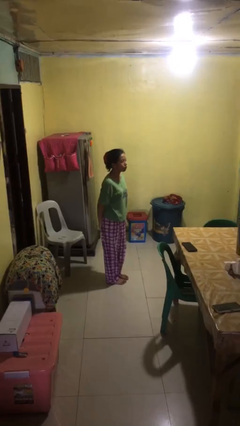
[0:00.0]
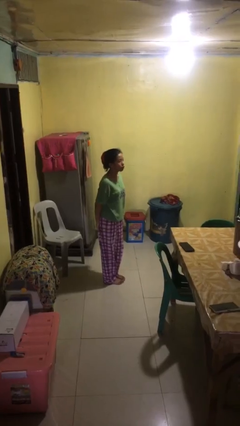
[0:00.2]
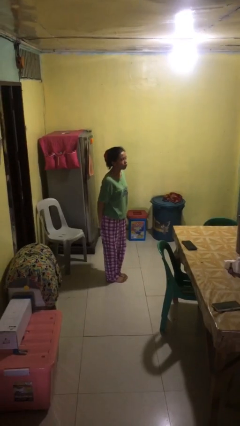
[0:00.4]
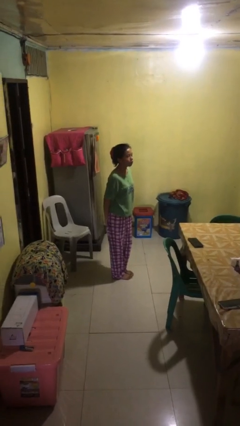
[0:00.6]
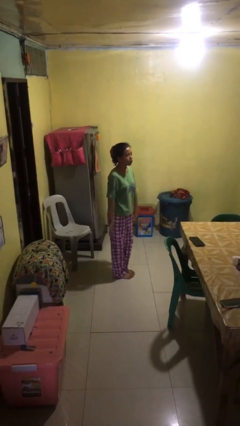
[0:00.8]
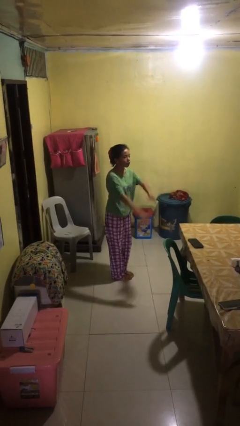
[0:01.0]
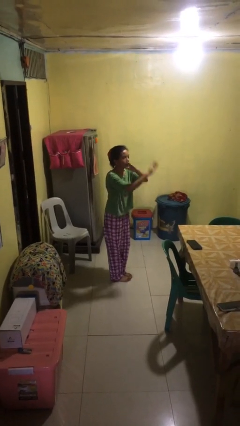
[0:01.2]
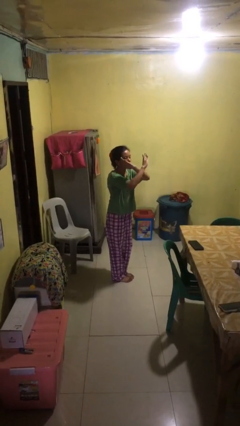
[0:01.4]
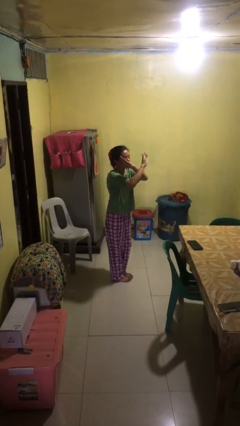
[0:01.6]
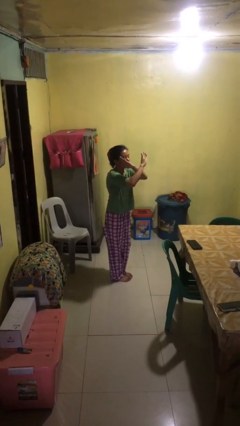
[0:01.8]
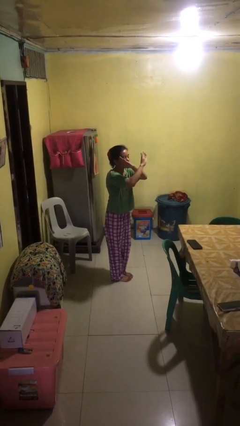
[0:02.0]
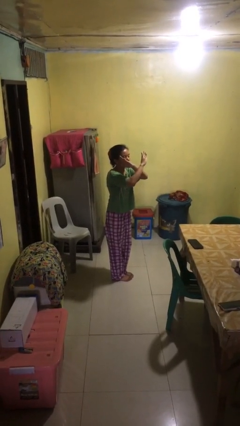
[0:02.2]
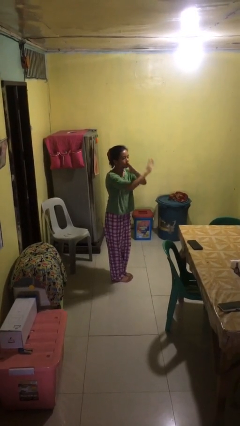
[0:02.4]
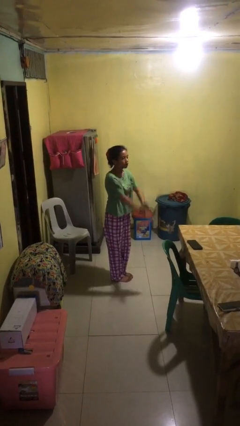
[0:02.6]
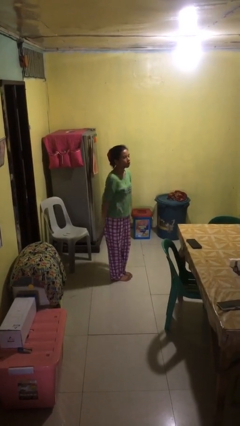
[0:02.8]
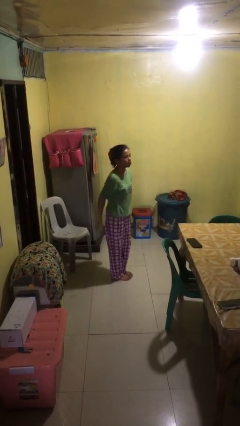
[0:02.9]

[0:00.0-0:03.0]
person gestures arms x

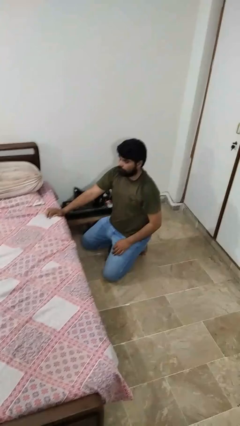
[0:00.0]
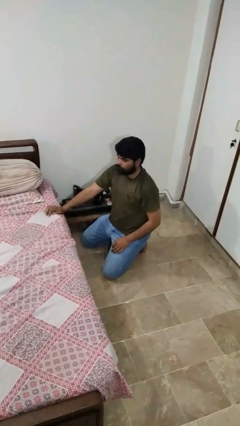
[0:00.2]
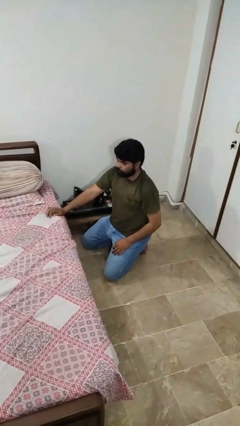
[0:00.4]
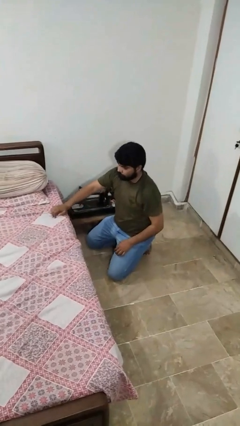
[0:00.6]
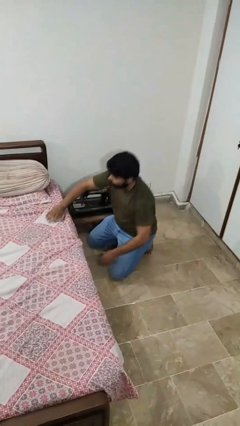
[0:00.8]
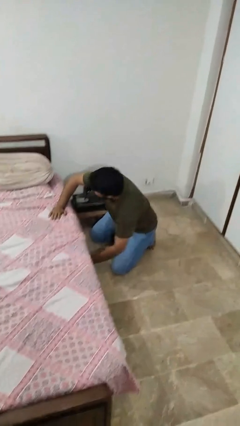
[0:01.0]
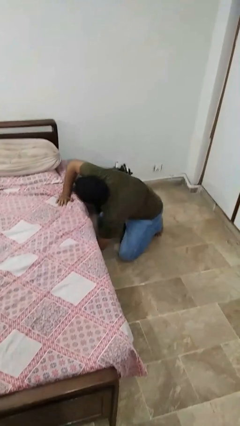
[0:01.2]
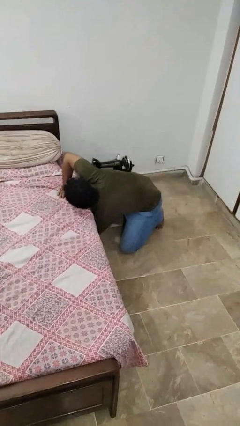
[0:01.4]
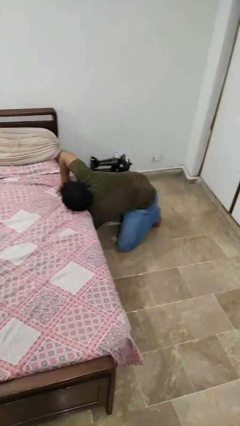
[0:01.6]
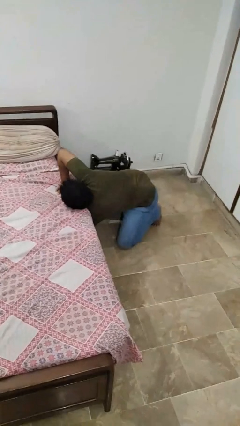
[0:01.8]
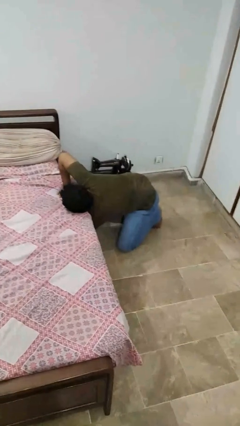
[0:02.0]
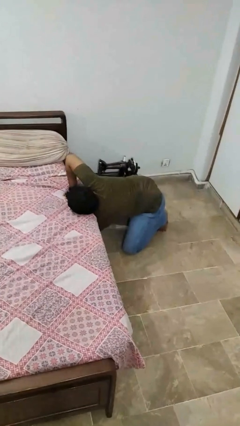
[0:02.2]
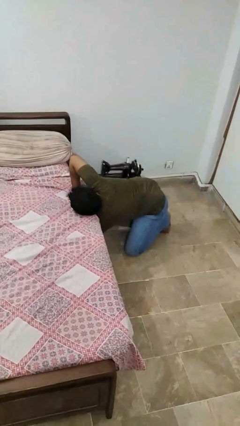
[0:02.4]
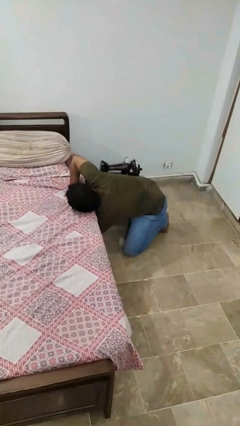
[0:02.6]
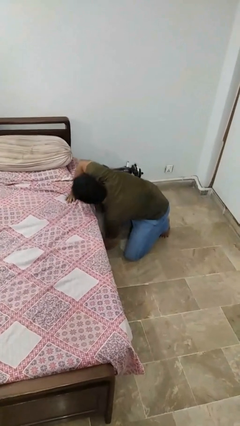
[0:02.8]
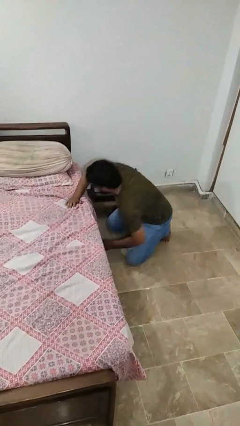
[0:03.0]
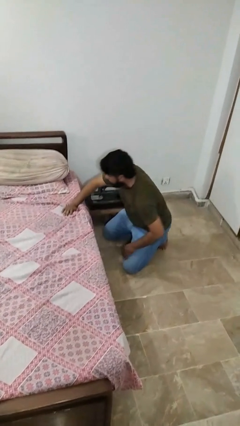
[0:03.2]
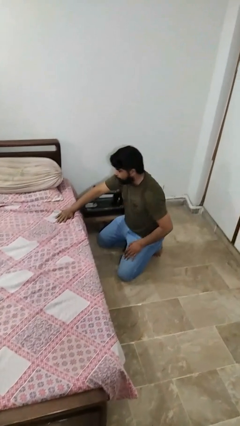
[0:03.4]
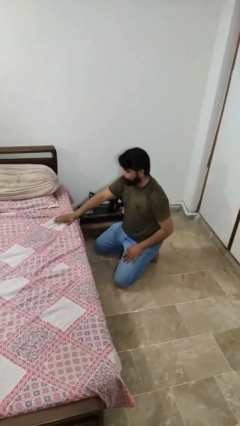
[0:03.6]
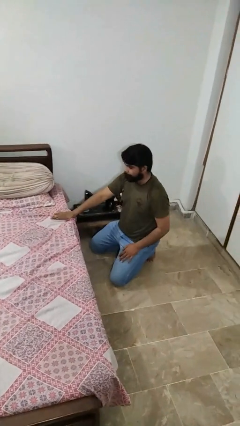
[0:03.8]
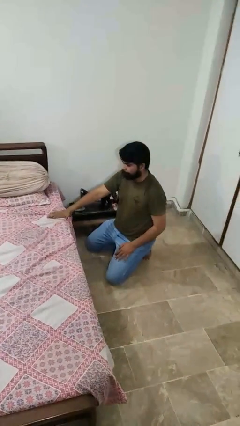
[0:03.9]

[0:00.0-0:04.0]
person searches under bed

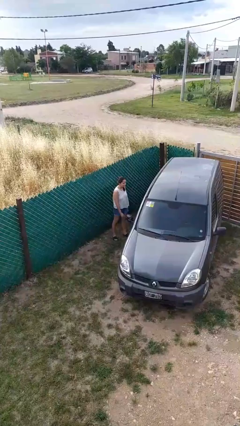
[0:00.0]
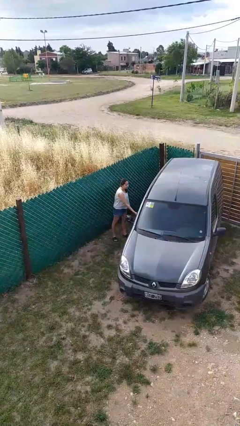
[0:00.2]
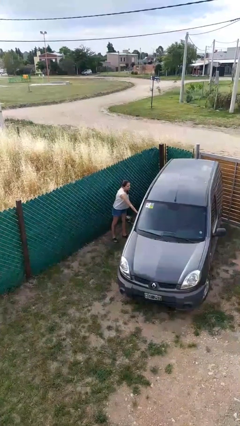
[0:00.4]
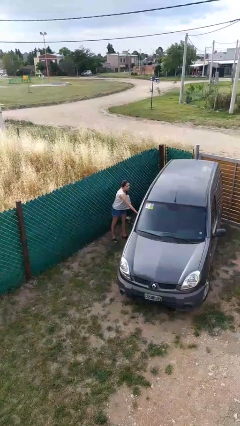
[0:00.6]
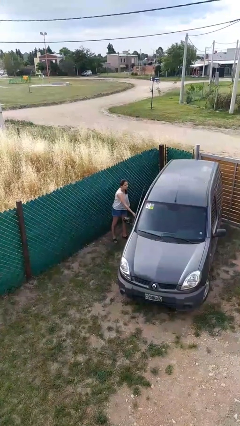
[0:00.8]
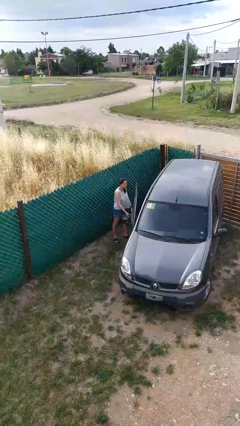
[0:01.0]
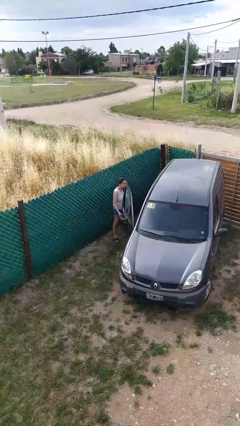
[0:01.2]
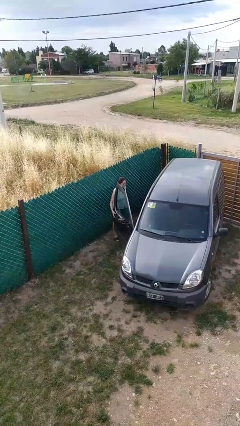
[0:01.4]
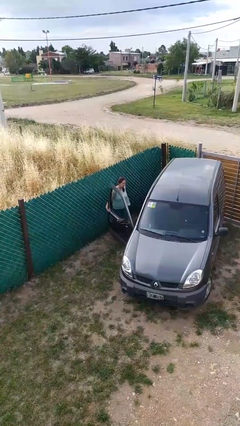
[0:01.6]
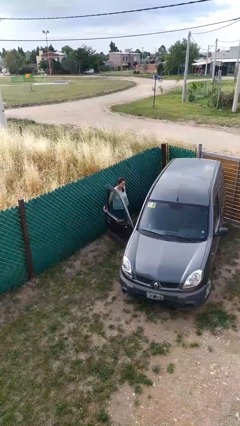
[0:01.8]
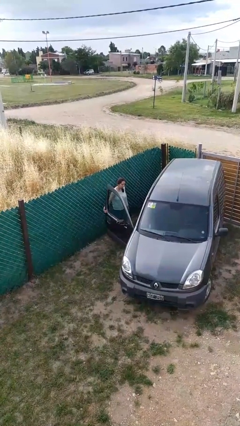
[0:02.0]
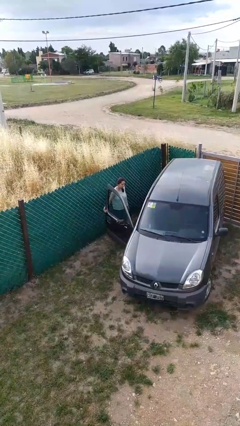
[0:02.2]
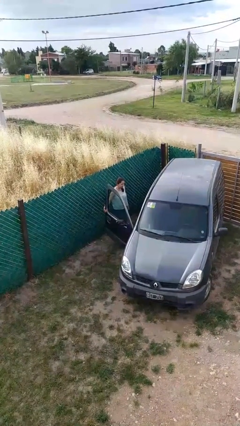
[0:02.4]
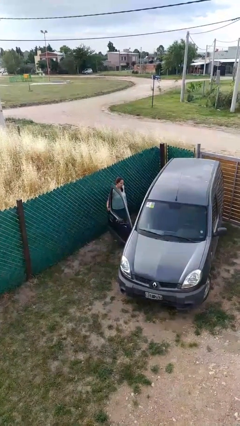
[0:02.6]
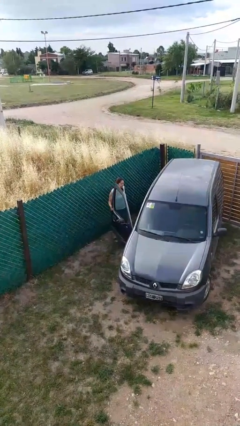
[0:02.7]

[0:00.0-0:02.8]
person opens car door

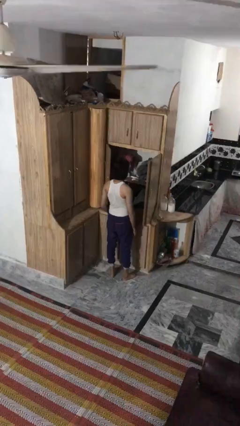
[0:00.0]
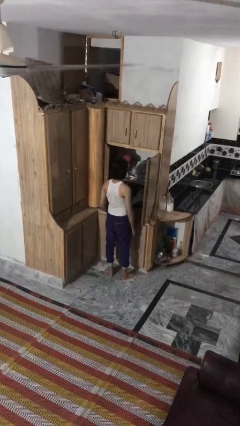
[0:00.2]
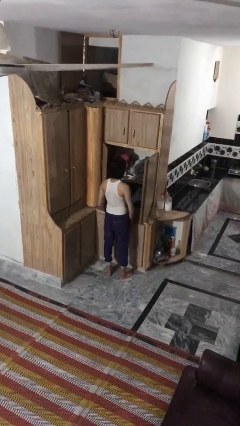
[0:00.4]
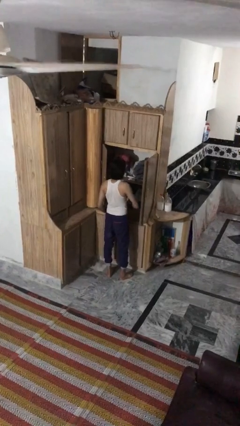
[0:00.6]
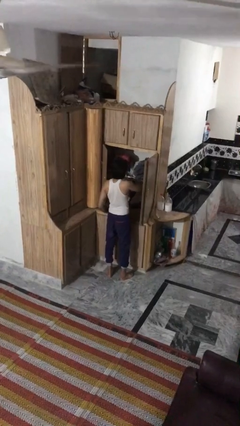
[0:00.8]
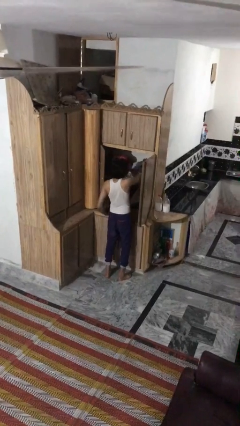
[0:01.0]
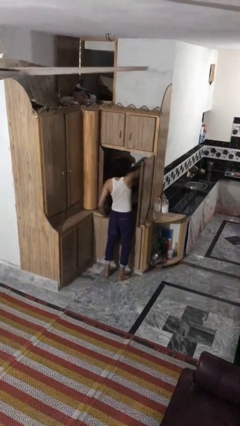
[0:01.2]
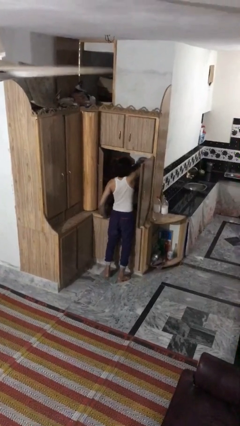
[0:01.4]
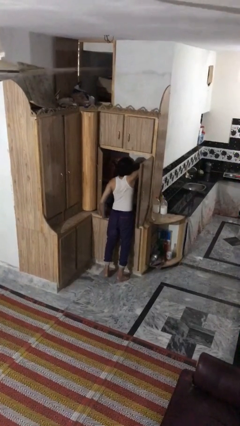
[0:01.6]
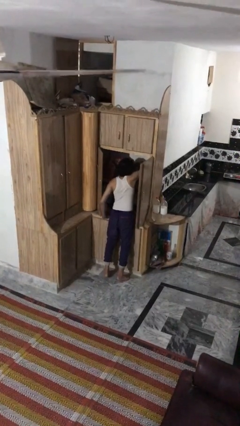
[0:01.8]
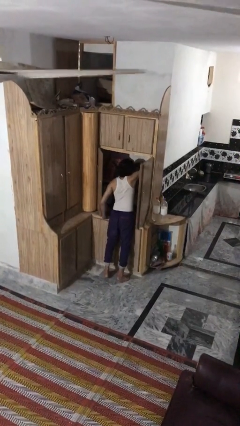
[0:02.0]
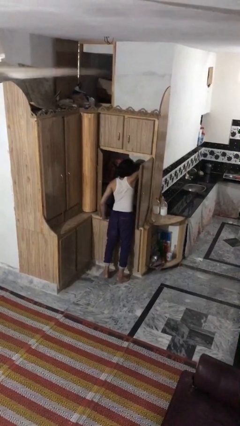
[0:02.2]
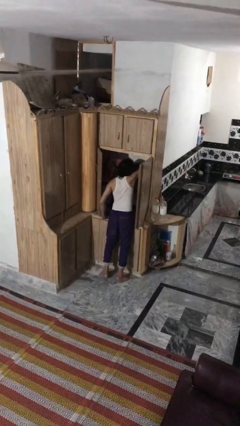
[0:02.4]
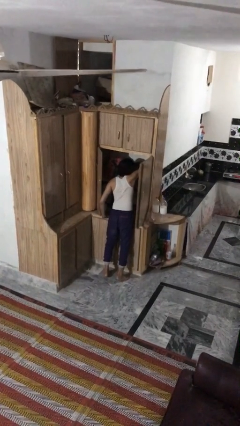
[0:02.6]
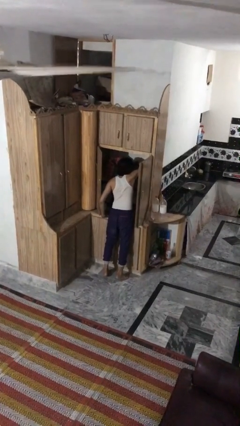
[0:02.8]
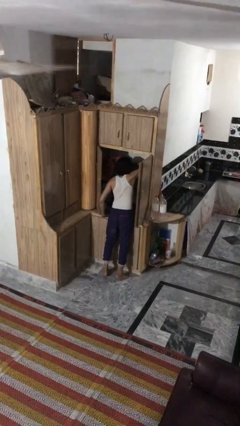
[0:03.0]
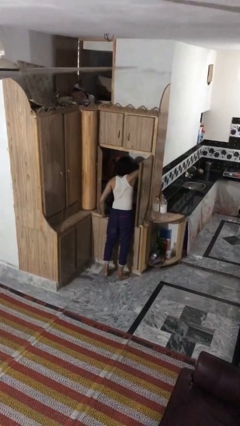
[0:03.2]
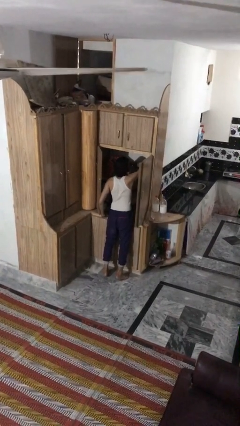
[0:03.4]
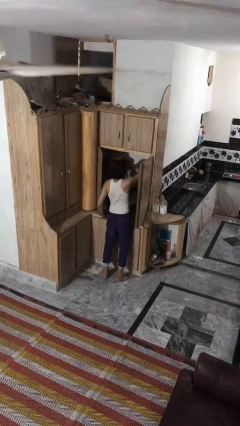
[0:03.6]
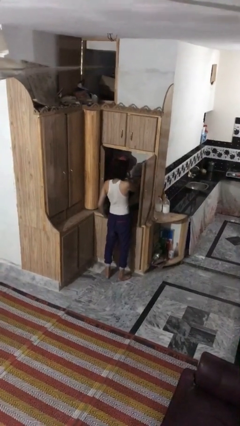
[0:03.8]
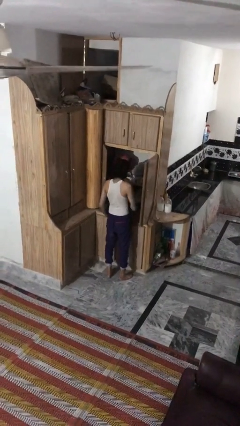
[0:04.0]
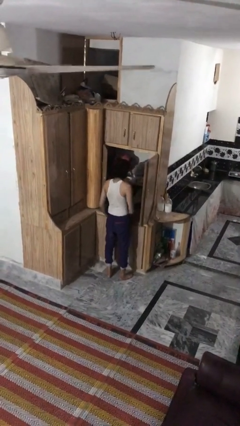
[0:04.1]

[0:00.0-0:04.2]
person searches in cabinet

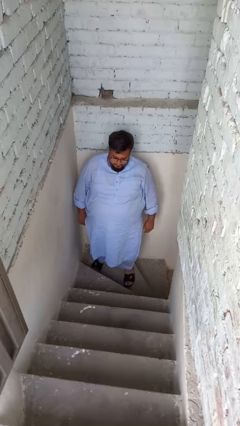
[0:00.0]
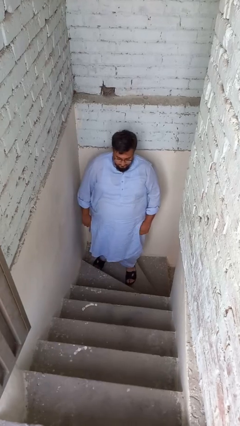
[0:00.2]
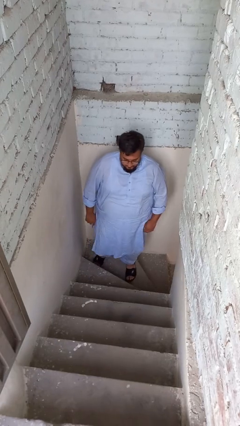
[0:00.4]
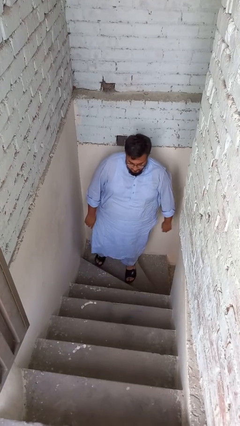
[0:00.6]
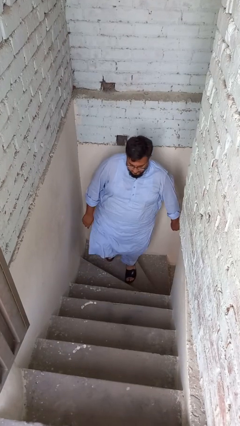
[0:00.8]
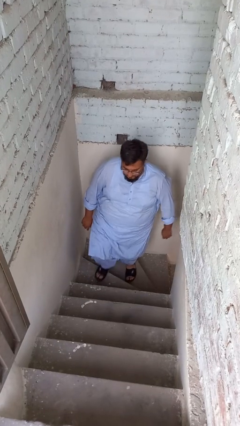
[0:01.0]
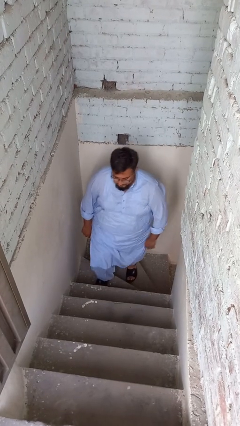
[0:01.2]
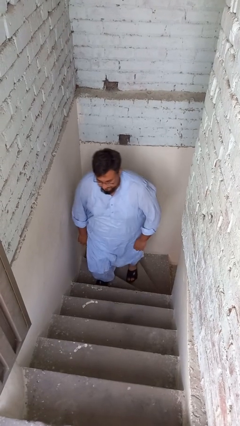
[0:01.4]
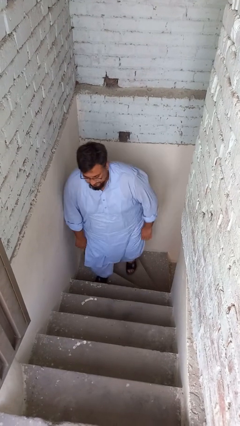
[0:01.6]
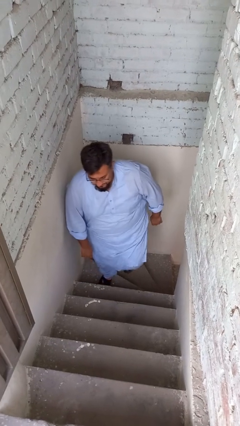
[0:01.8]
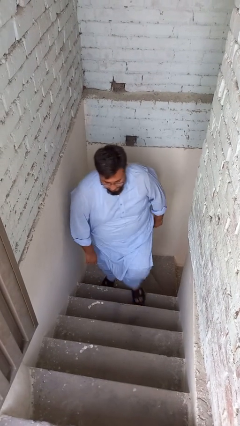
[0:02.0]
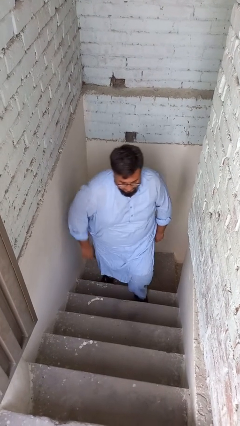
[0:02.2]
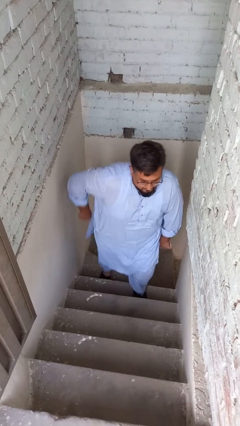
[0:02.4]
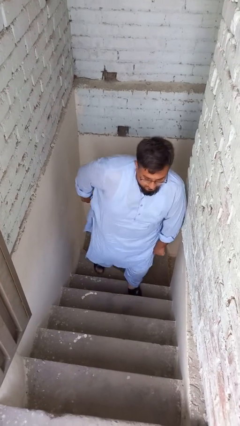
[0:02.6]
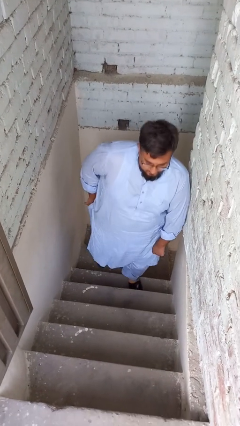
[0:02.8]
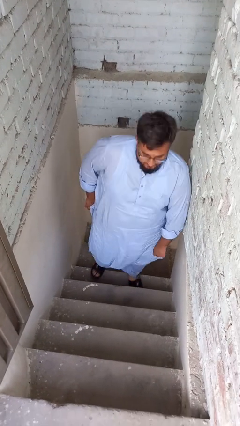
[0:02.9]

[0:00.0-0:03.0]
person climbs up stairs

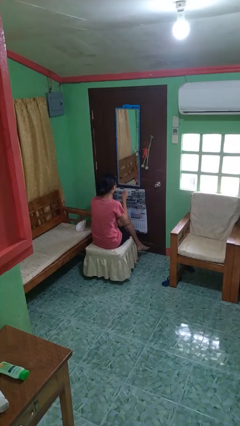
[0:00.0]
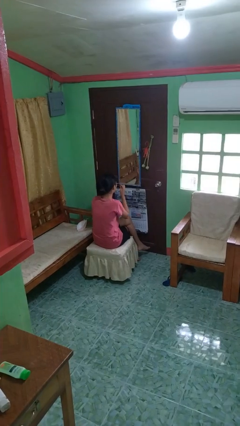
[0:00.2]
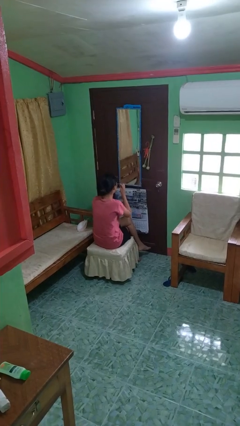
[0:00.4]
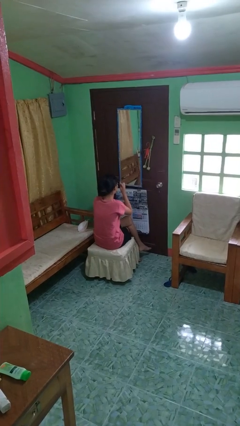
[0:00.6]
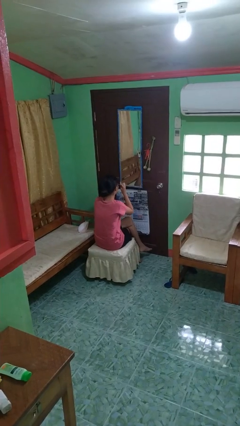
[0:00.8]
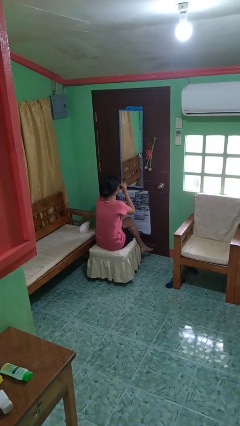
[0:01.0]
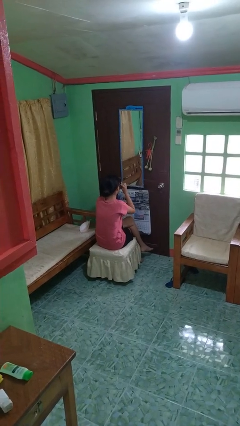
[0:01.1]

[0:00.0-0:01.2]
person puts on sunglasses
